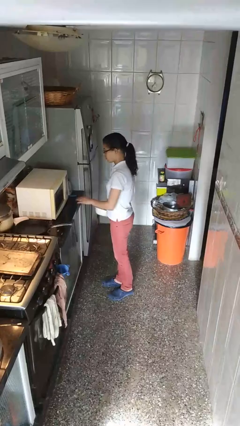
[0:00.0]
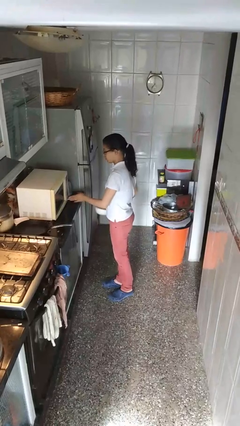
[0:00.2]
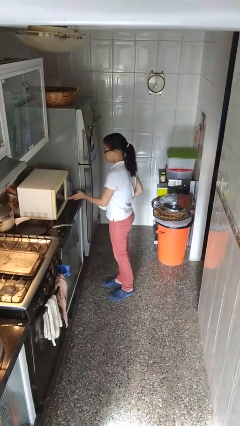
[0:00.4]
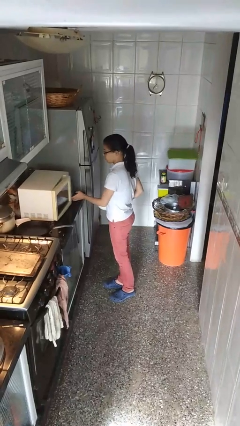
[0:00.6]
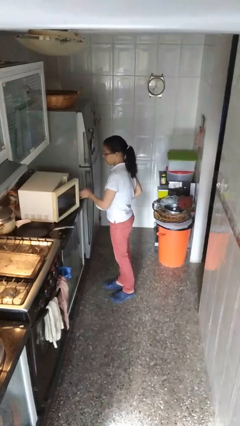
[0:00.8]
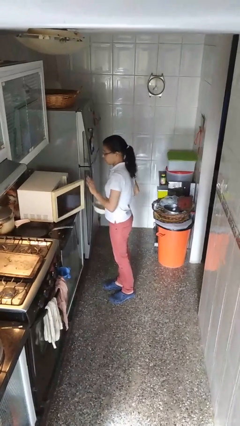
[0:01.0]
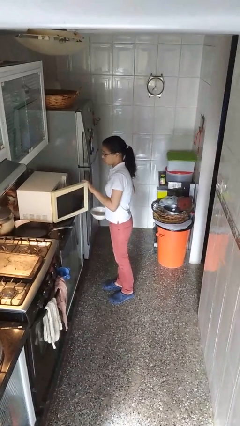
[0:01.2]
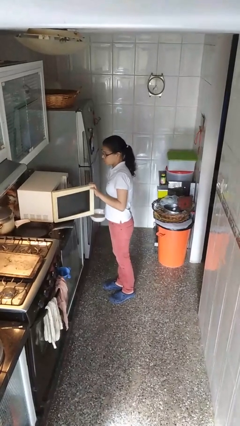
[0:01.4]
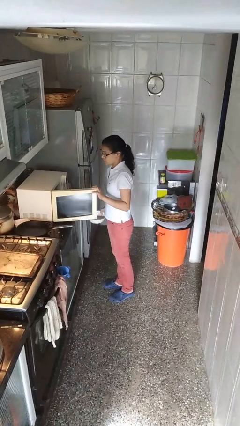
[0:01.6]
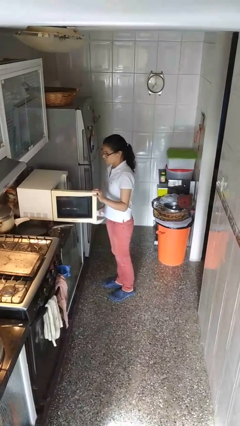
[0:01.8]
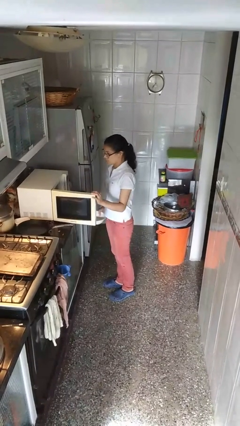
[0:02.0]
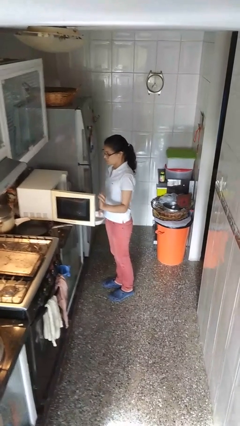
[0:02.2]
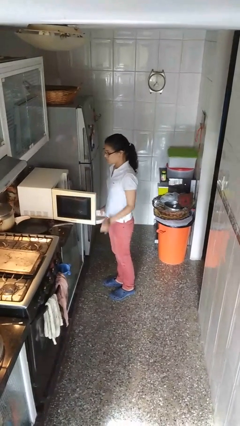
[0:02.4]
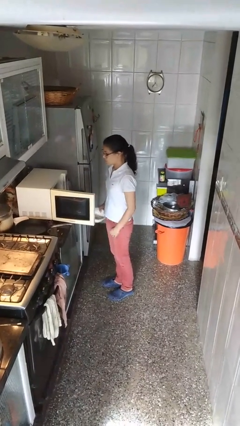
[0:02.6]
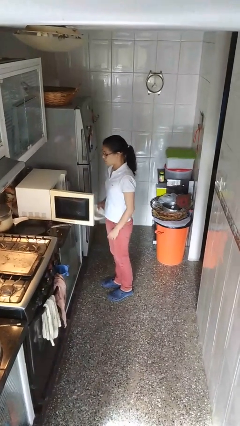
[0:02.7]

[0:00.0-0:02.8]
person opens microwave

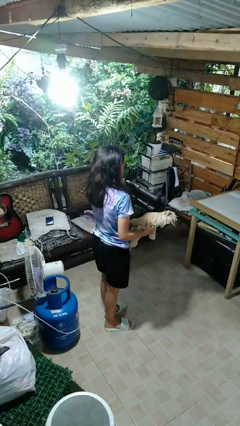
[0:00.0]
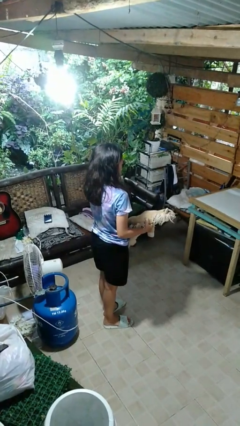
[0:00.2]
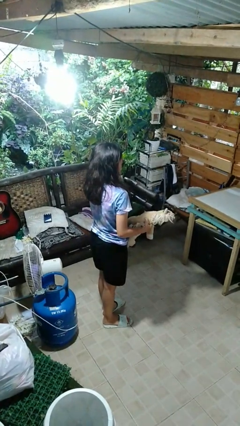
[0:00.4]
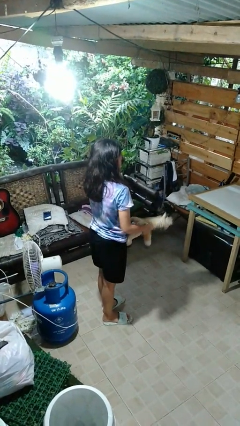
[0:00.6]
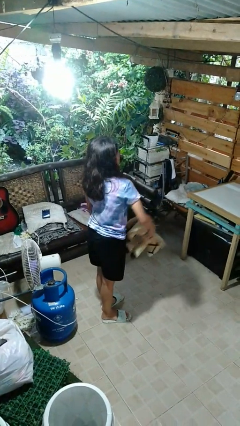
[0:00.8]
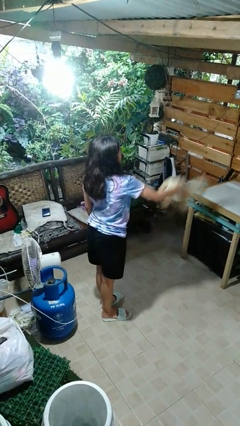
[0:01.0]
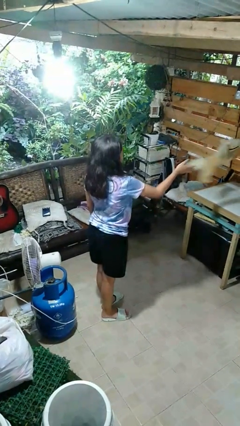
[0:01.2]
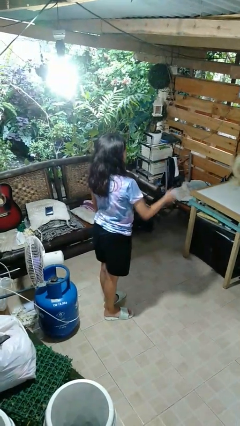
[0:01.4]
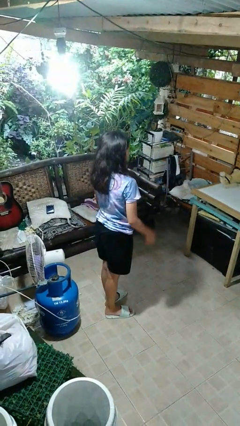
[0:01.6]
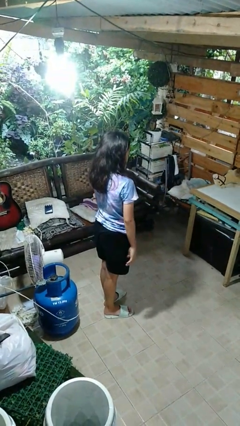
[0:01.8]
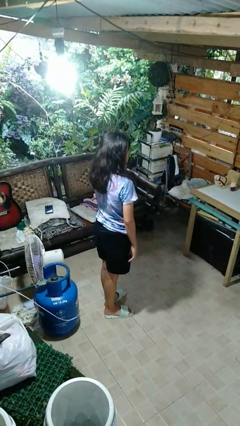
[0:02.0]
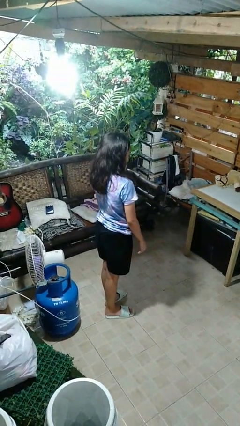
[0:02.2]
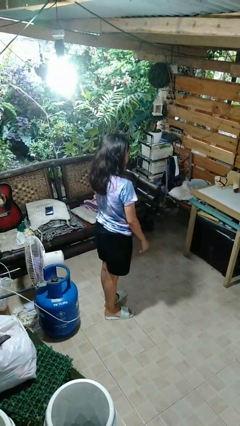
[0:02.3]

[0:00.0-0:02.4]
person throws object on table

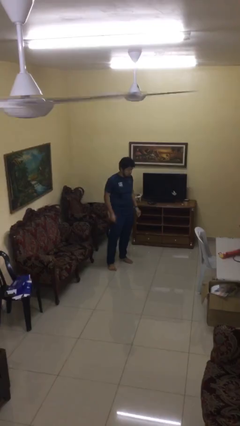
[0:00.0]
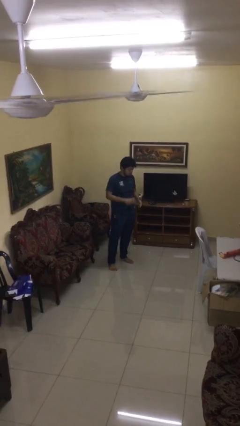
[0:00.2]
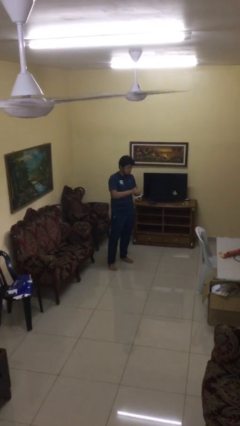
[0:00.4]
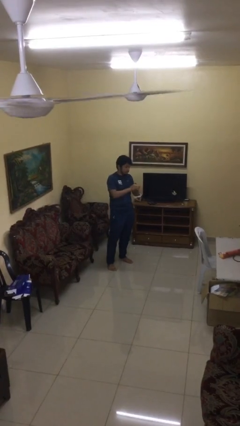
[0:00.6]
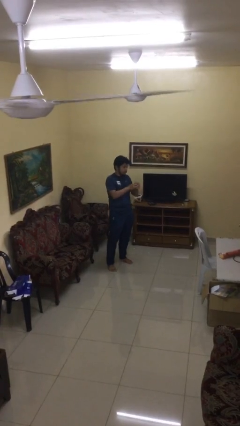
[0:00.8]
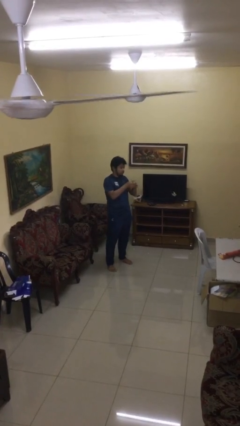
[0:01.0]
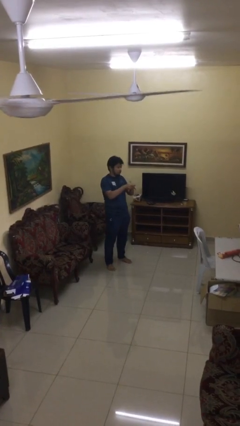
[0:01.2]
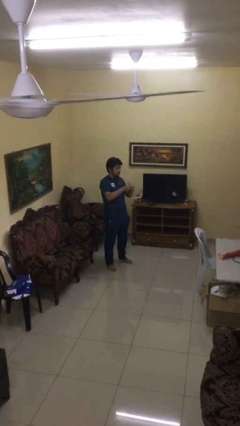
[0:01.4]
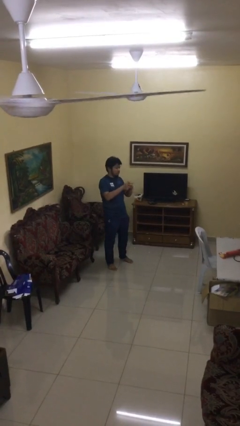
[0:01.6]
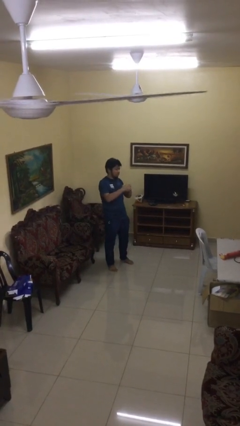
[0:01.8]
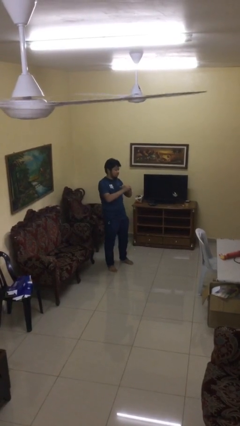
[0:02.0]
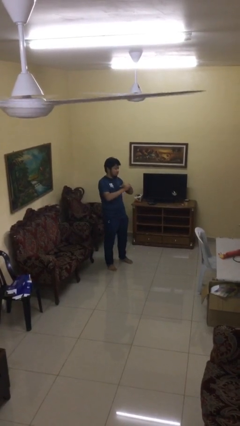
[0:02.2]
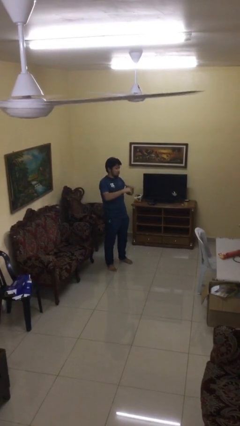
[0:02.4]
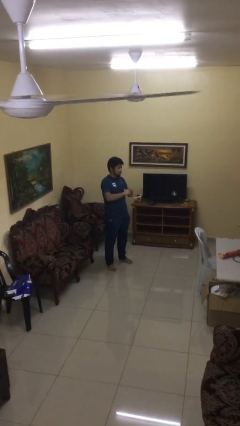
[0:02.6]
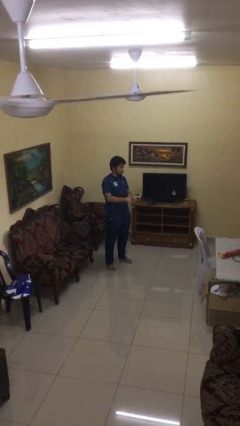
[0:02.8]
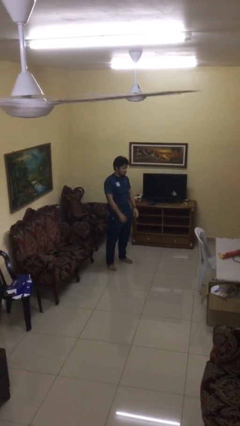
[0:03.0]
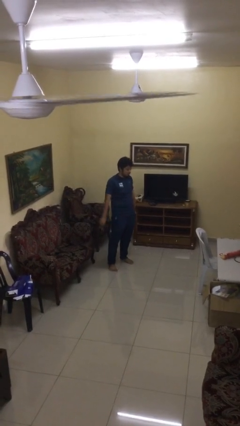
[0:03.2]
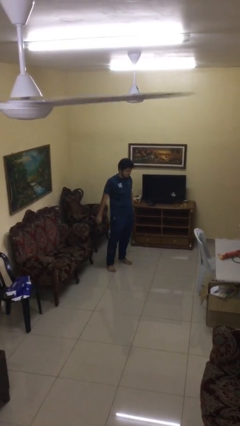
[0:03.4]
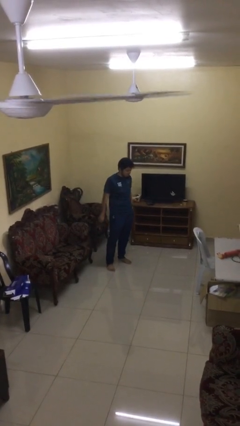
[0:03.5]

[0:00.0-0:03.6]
person cracks knuckles

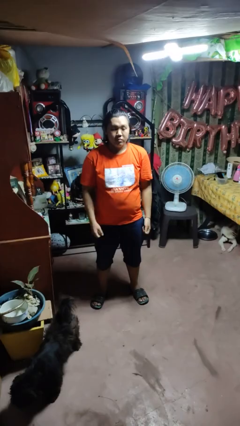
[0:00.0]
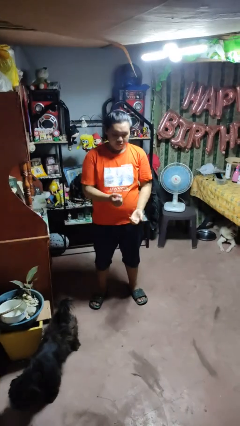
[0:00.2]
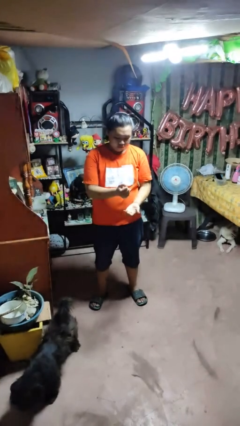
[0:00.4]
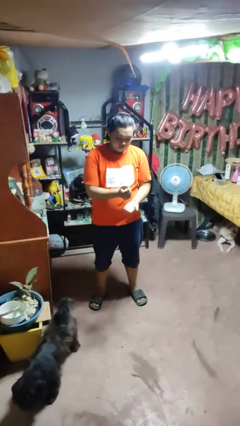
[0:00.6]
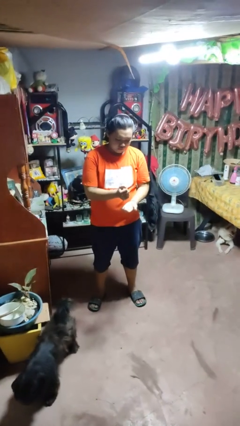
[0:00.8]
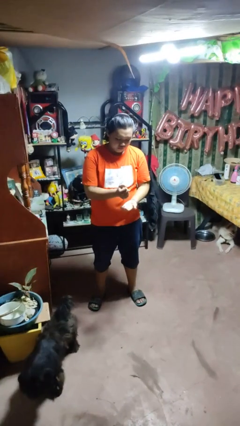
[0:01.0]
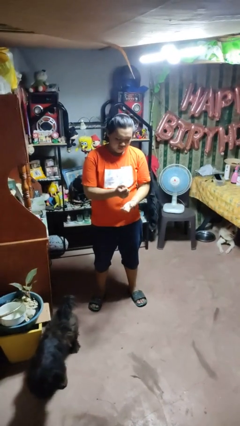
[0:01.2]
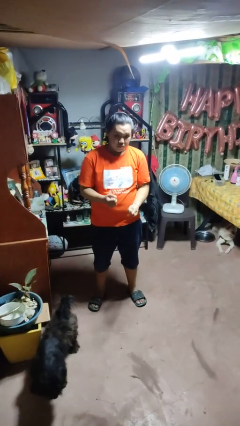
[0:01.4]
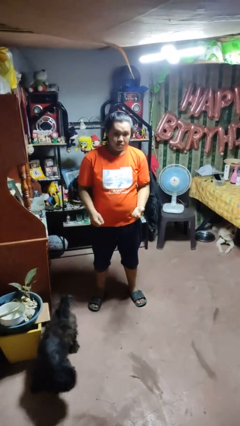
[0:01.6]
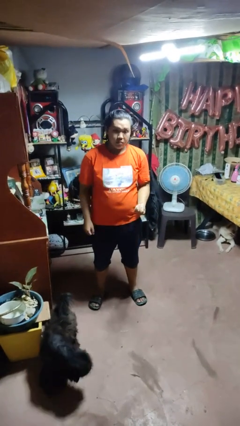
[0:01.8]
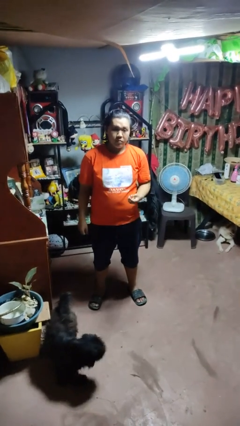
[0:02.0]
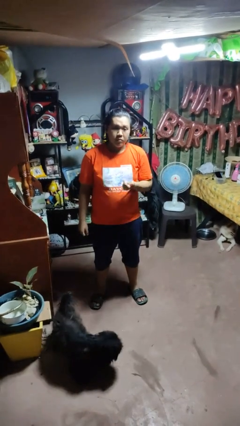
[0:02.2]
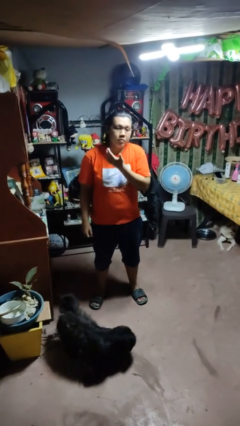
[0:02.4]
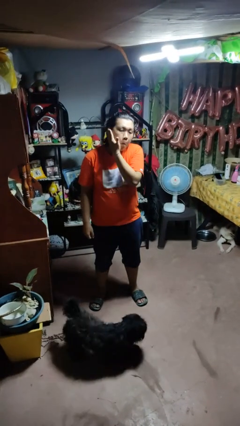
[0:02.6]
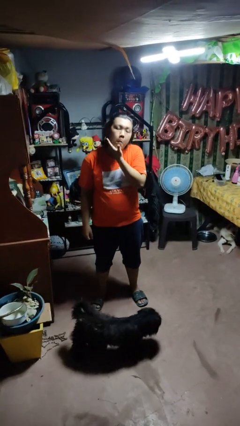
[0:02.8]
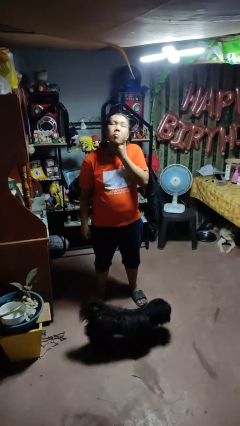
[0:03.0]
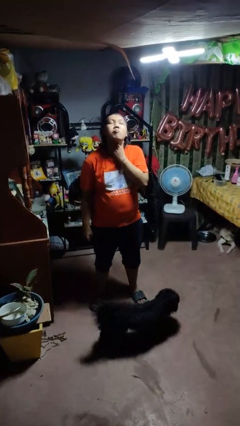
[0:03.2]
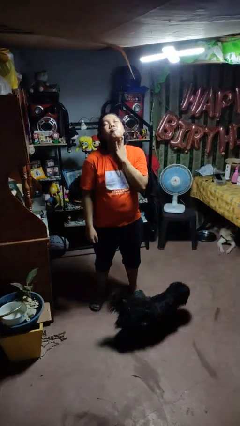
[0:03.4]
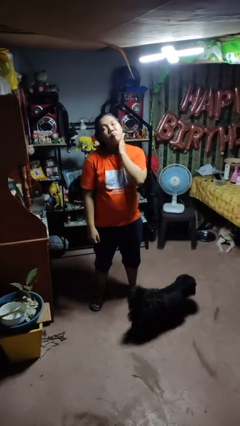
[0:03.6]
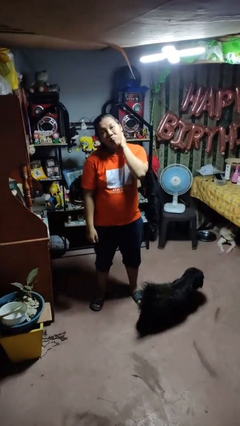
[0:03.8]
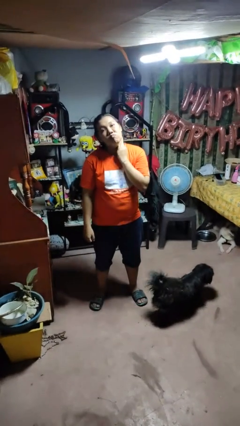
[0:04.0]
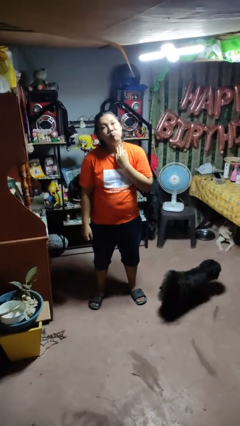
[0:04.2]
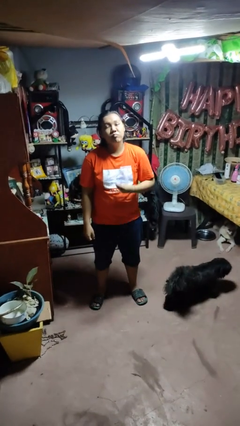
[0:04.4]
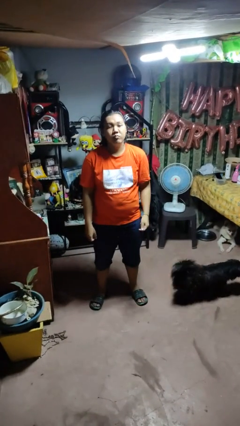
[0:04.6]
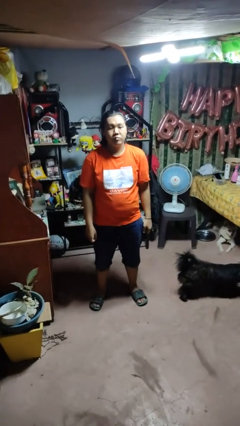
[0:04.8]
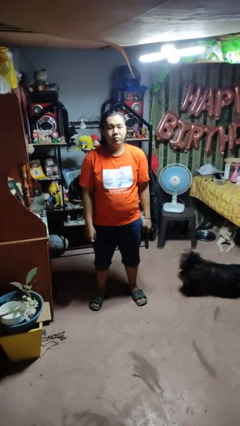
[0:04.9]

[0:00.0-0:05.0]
person applies facial moisturizer

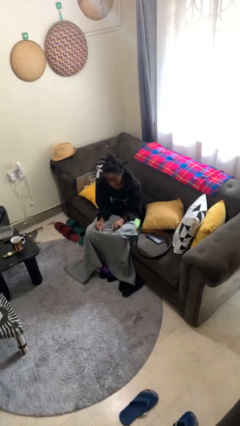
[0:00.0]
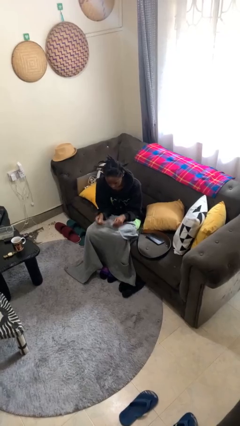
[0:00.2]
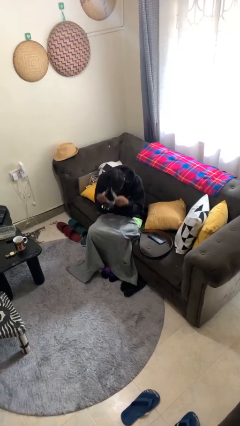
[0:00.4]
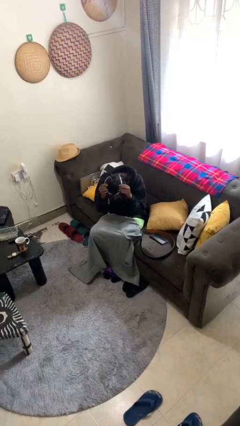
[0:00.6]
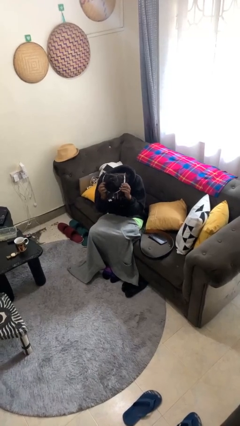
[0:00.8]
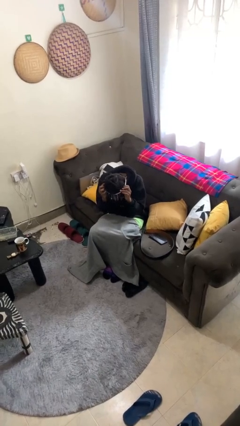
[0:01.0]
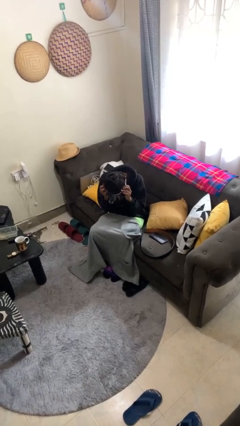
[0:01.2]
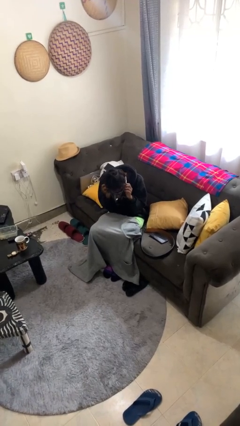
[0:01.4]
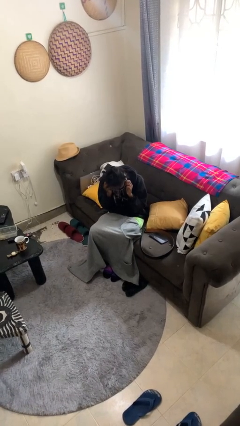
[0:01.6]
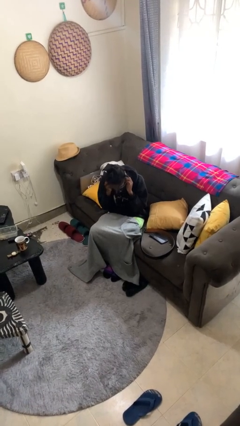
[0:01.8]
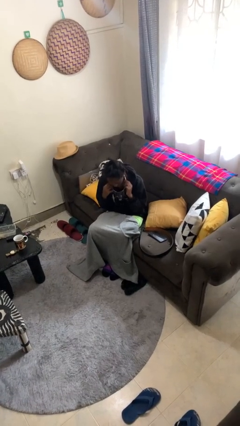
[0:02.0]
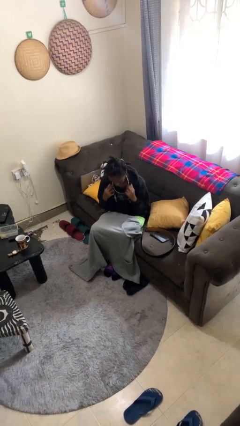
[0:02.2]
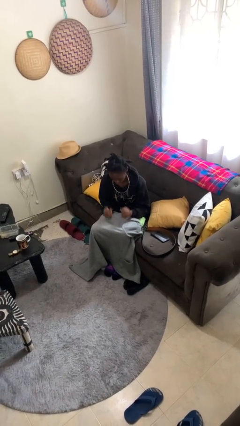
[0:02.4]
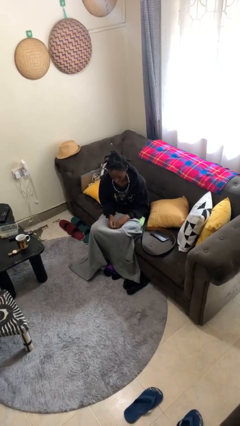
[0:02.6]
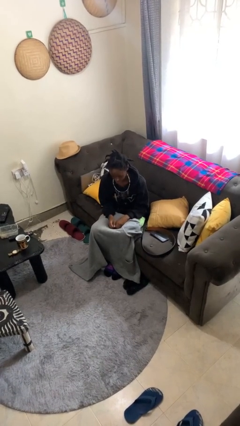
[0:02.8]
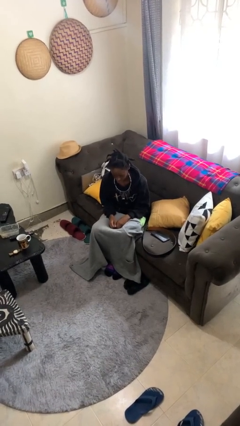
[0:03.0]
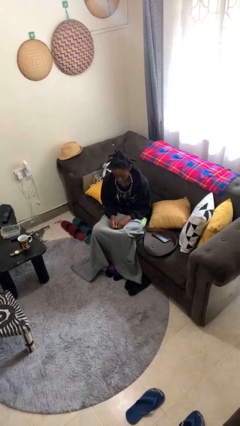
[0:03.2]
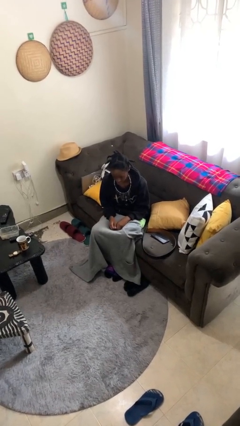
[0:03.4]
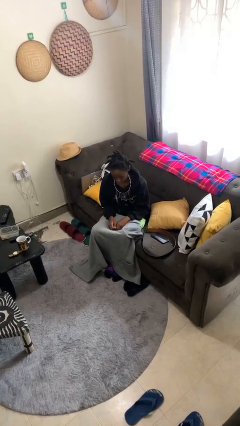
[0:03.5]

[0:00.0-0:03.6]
person puts on necklace

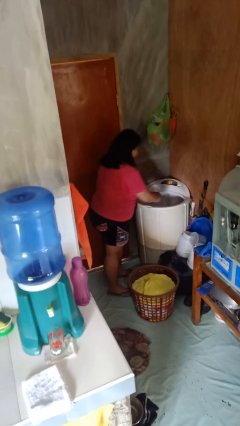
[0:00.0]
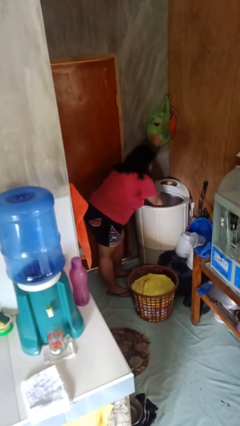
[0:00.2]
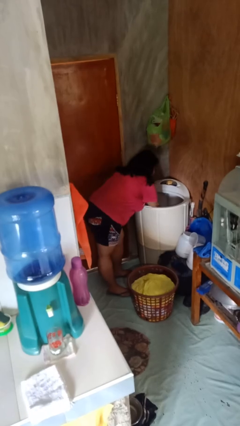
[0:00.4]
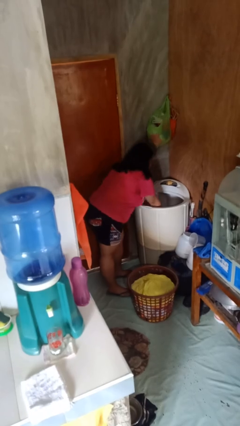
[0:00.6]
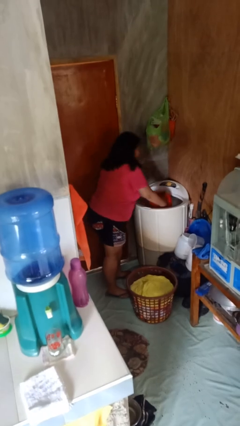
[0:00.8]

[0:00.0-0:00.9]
person unloads clotheswasher
